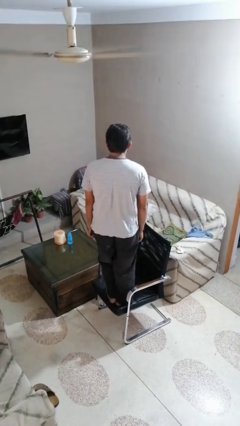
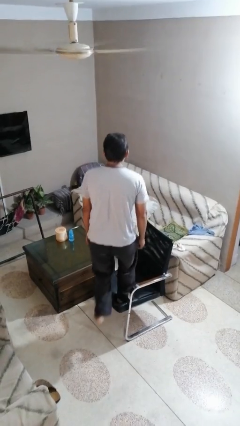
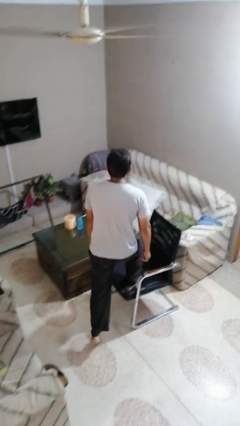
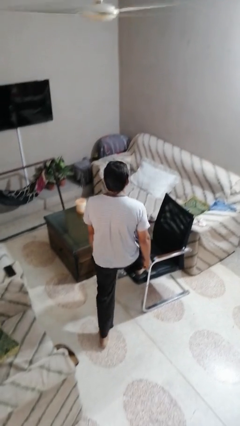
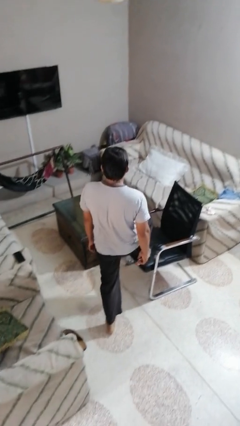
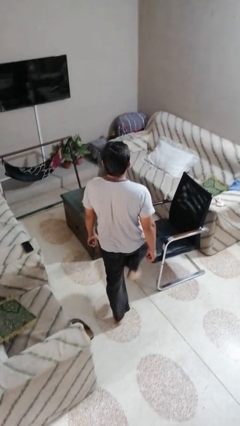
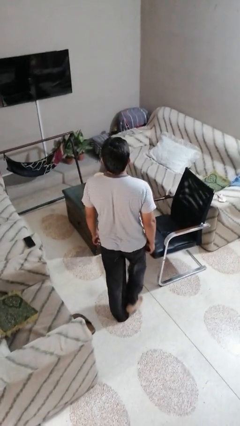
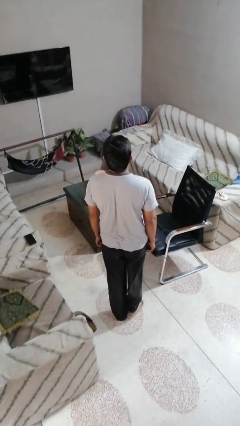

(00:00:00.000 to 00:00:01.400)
person climbs off chair

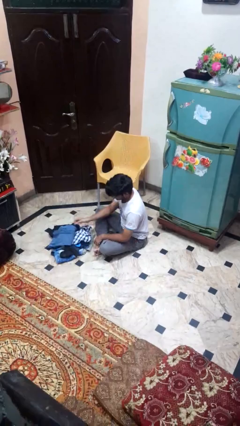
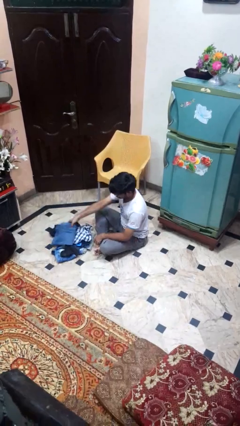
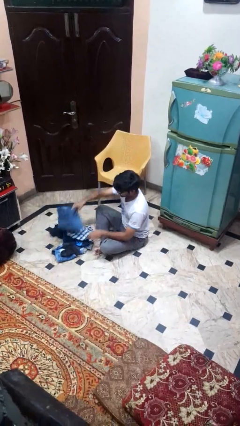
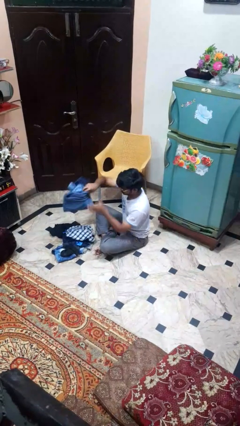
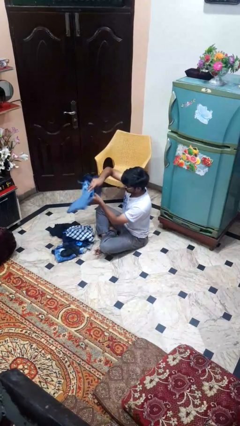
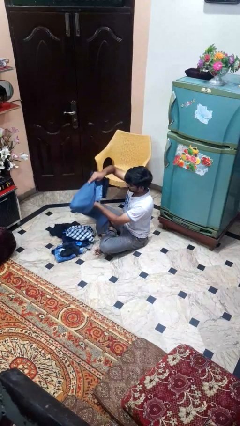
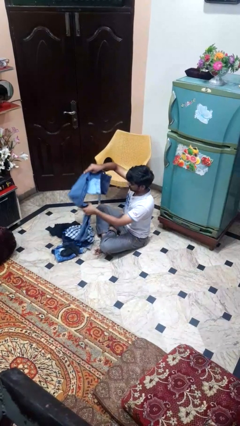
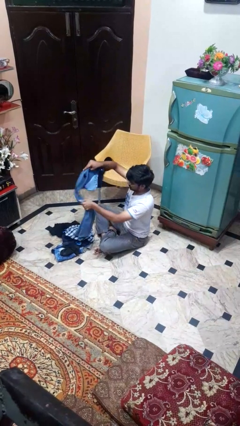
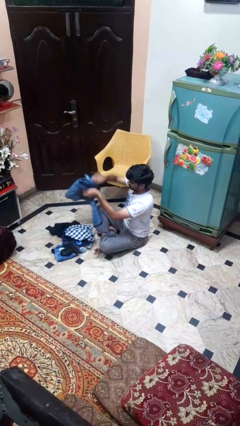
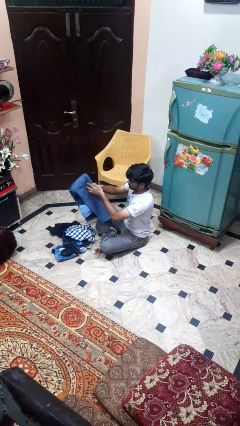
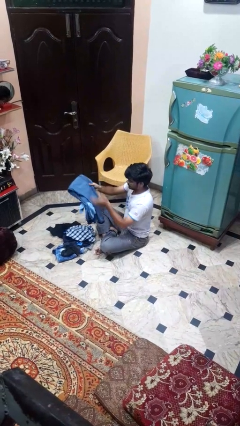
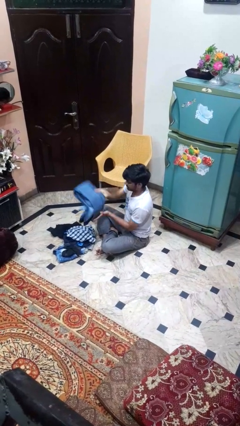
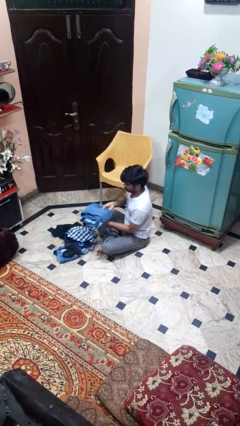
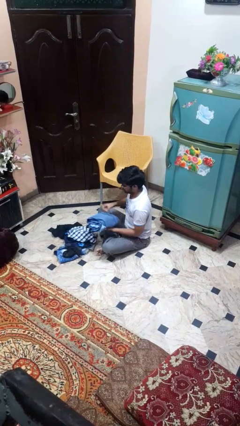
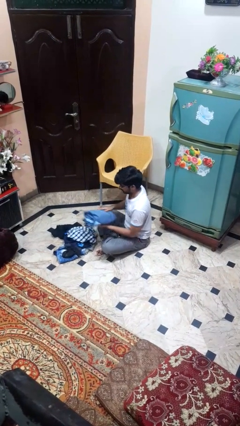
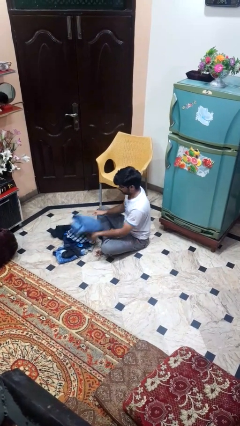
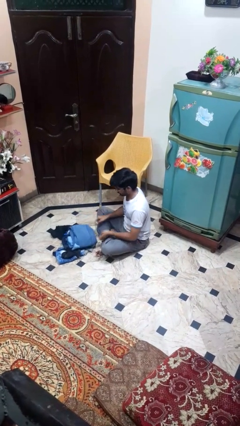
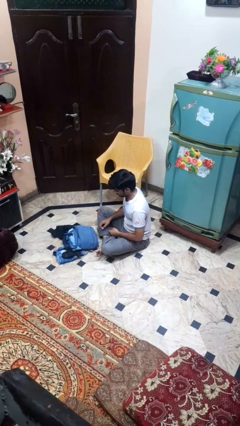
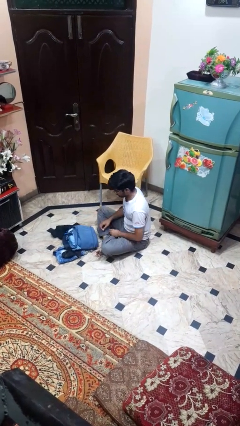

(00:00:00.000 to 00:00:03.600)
person folds pants

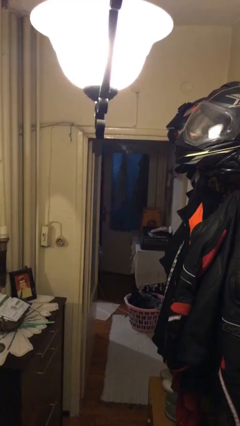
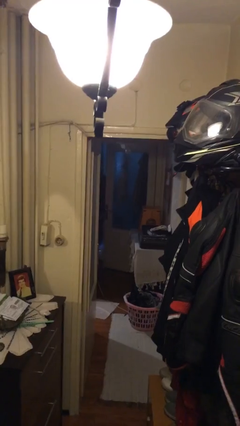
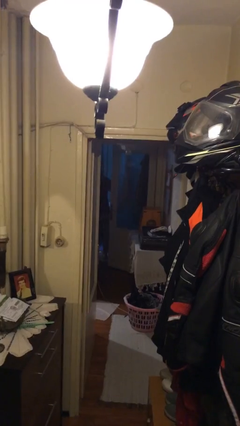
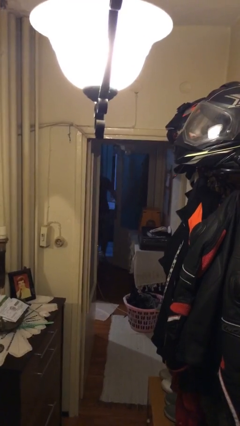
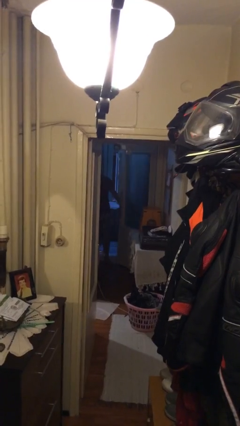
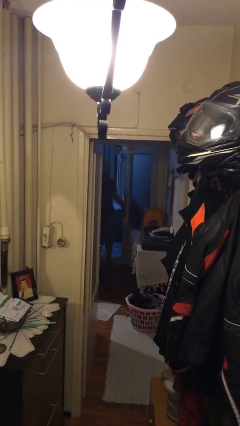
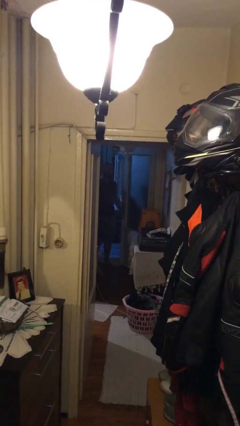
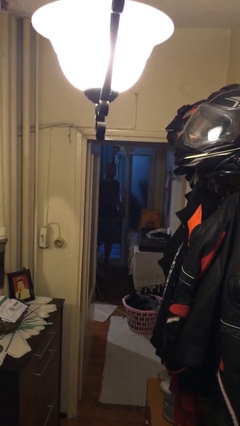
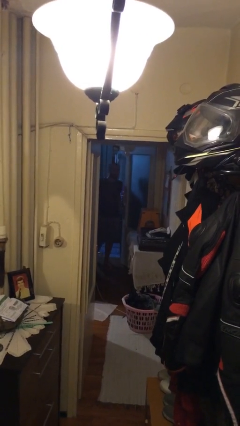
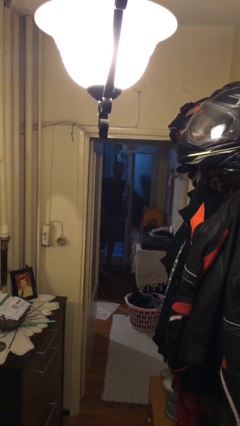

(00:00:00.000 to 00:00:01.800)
person opens facility door

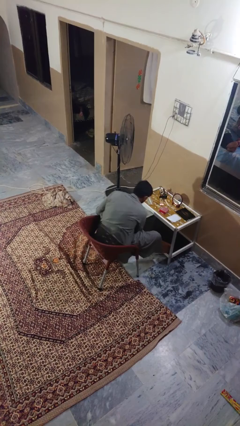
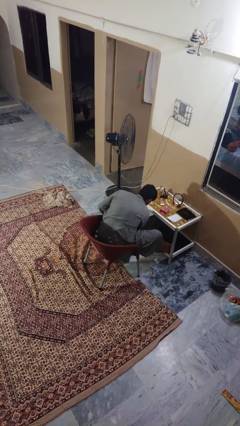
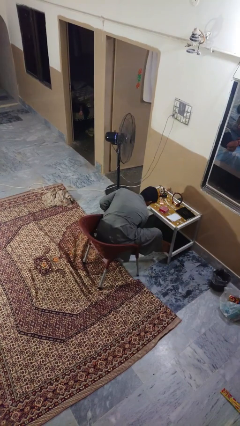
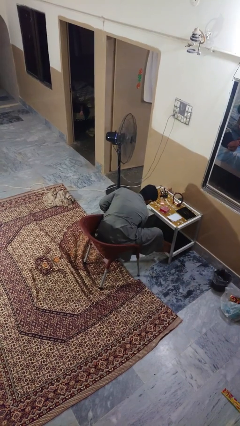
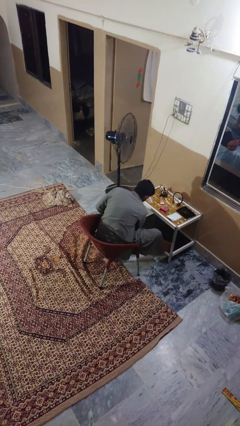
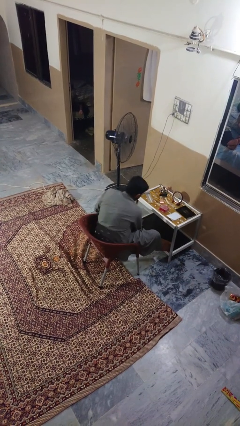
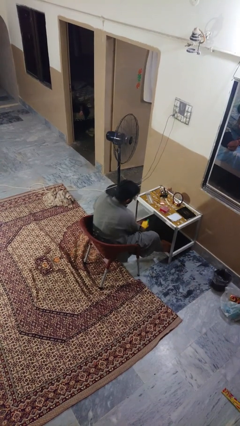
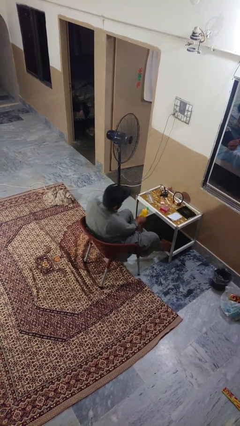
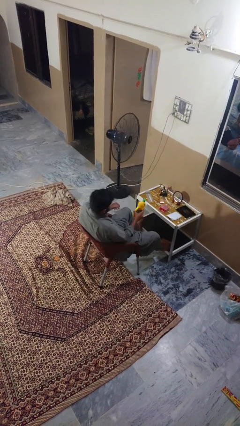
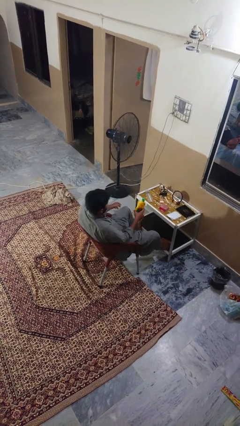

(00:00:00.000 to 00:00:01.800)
person picks up object from floor

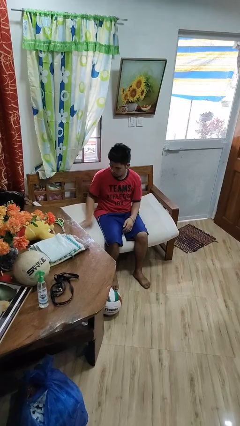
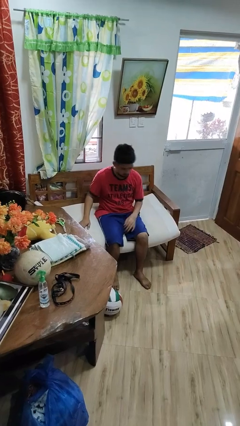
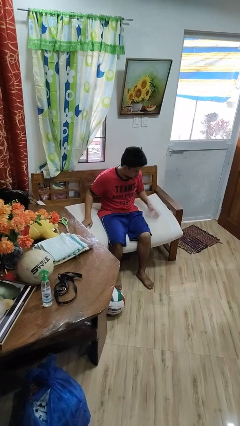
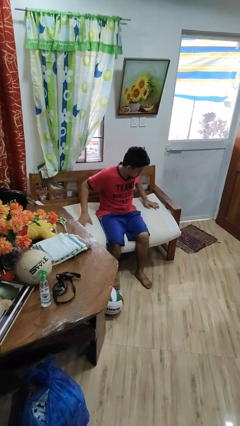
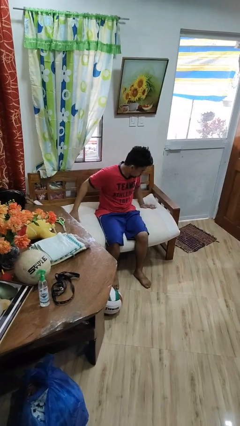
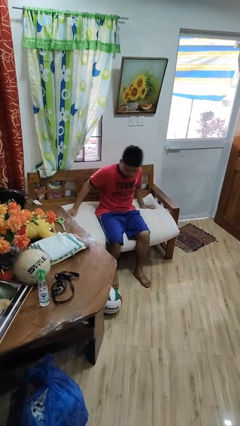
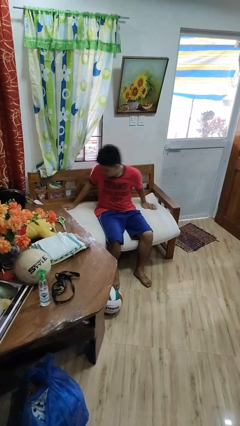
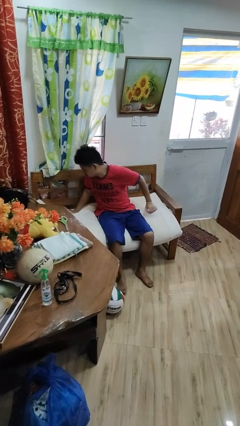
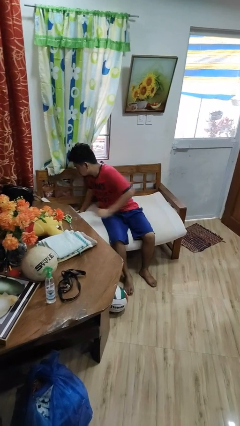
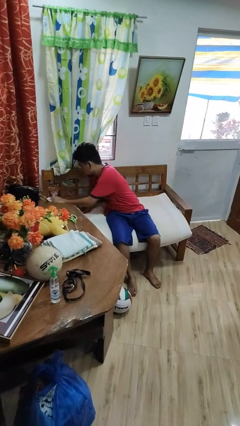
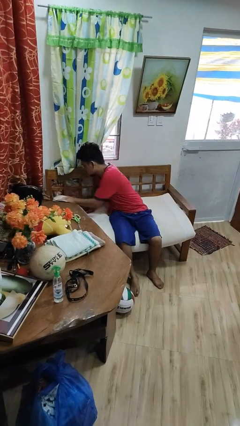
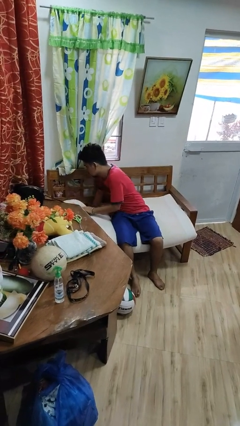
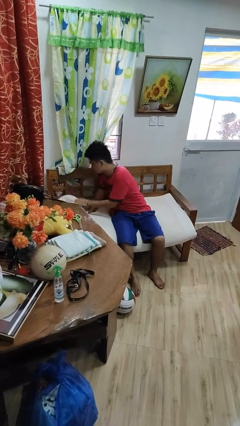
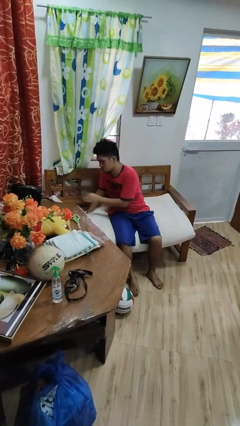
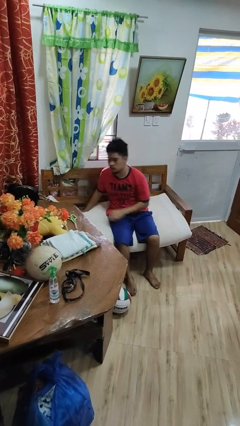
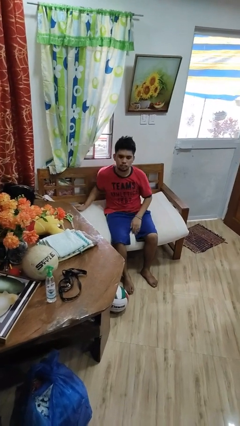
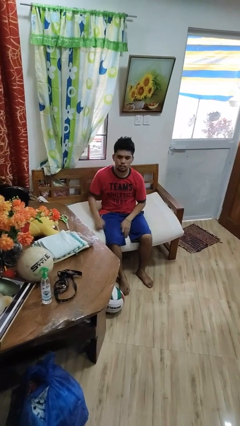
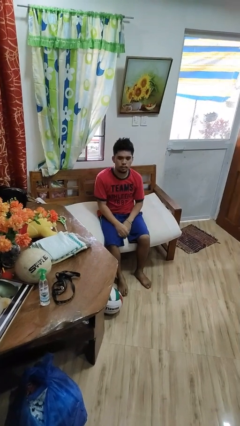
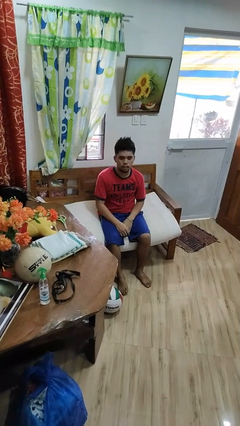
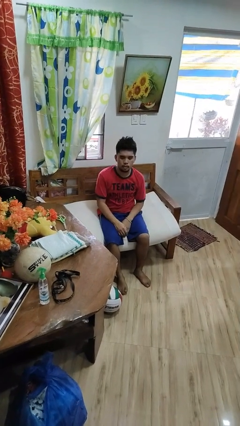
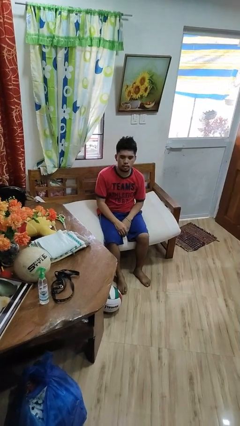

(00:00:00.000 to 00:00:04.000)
person searches in couch

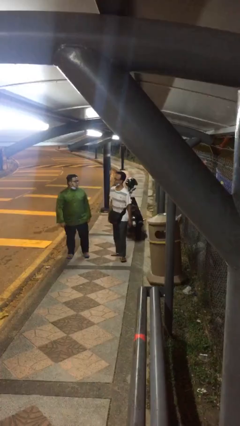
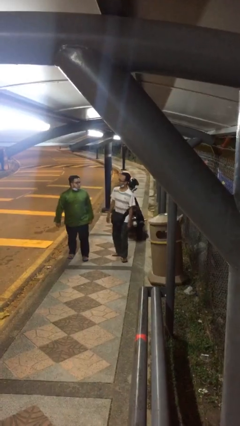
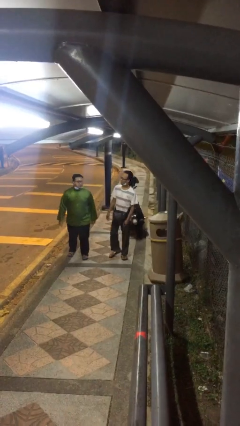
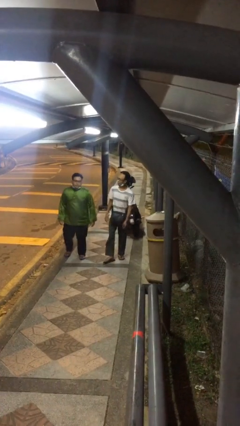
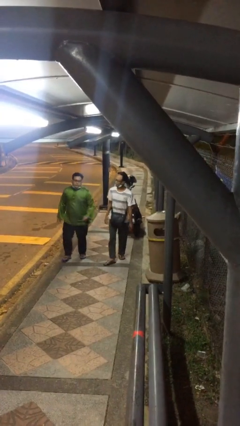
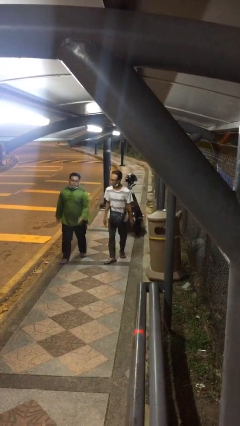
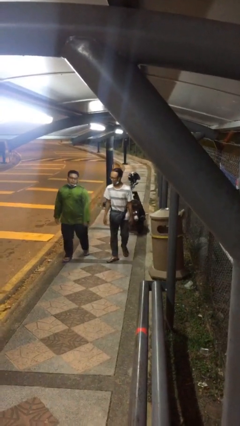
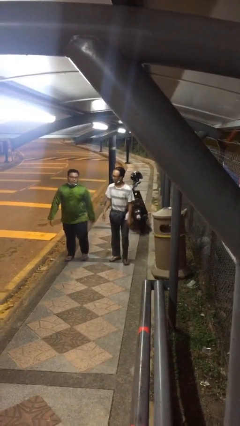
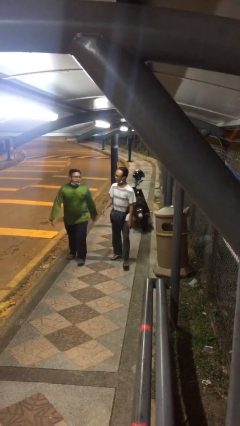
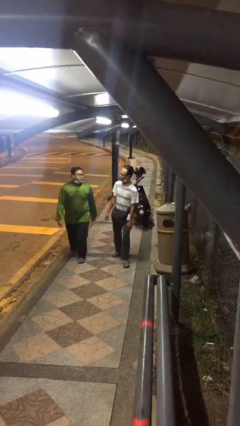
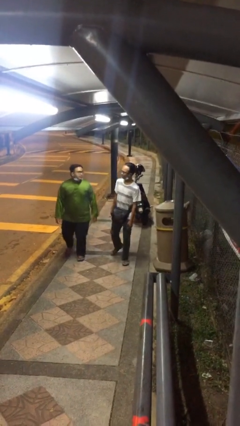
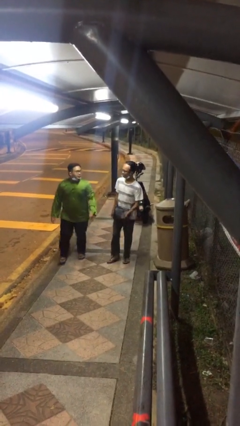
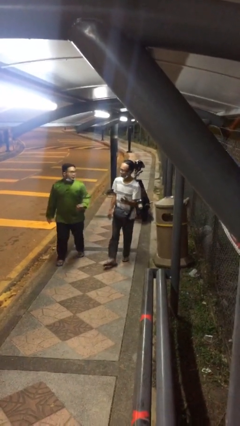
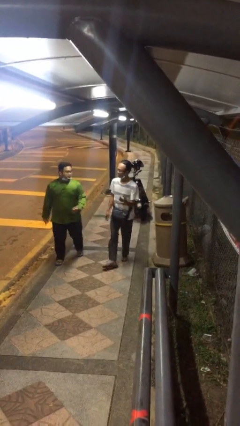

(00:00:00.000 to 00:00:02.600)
person talks to person

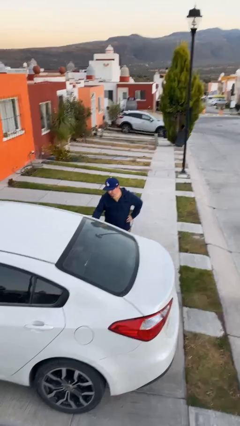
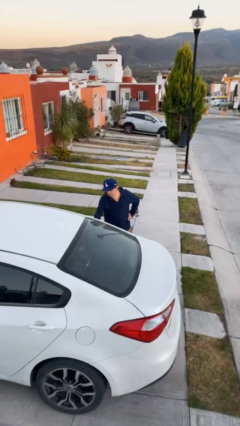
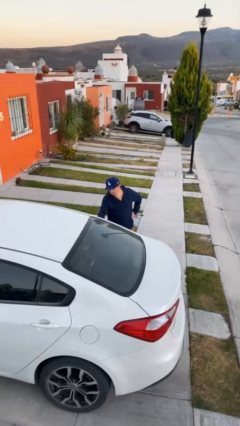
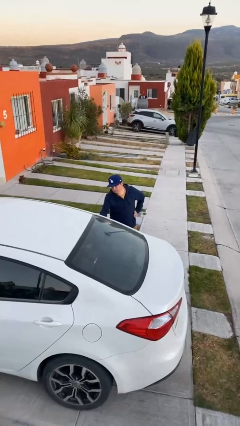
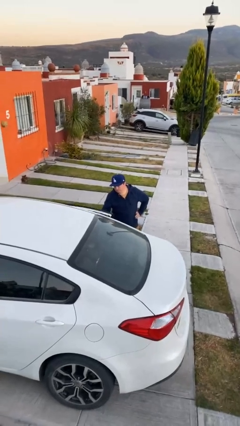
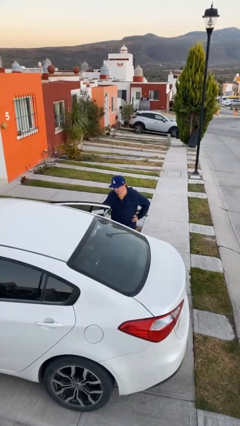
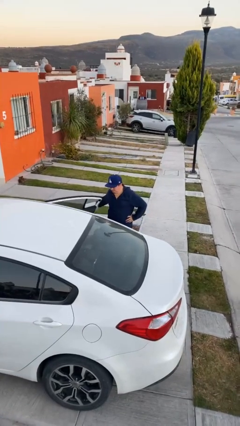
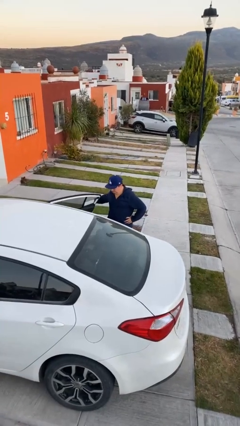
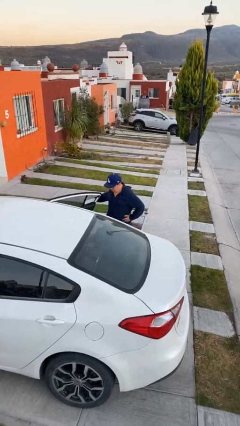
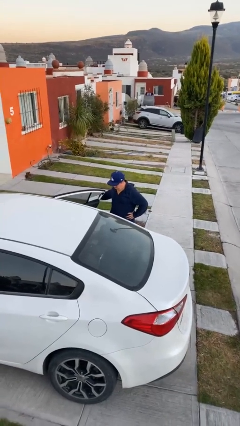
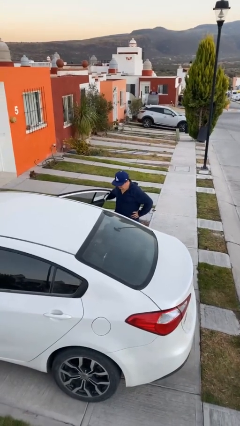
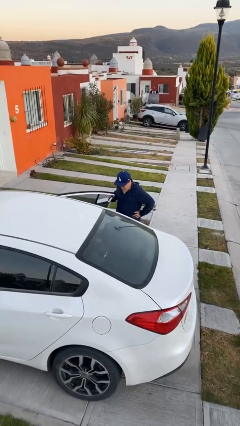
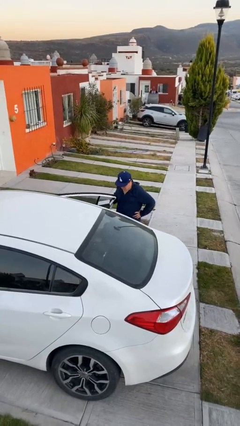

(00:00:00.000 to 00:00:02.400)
person opens car door
